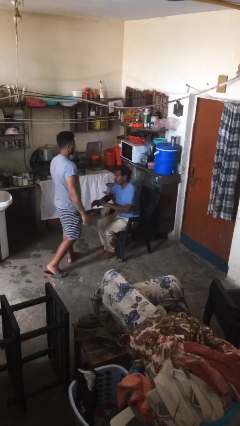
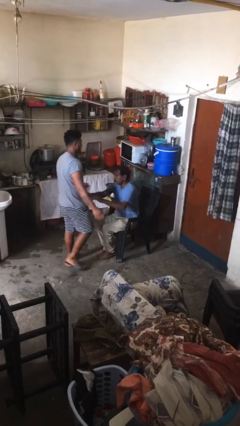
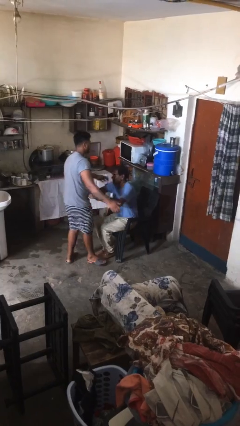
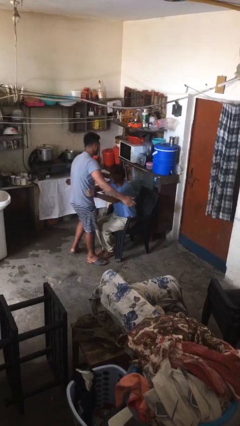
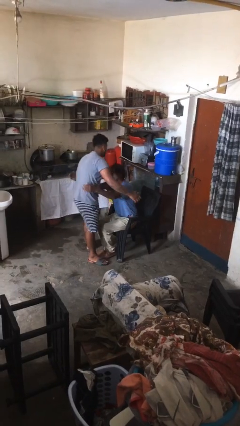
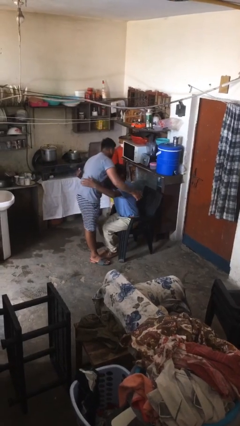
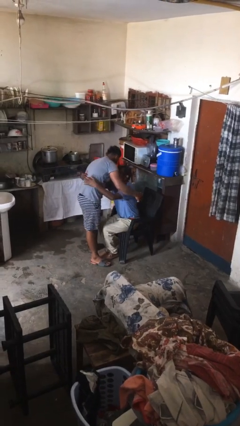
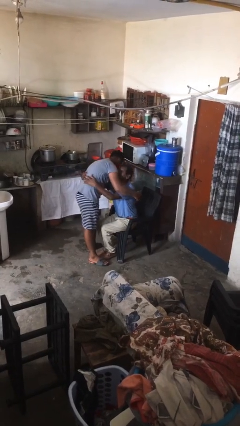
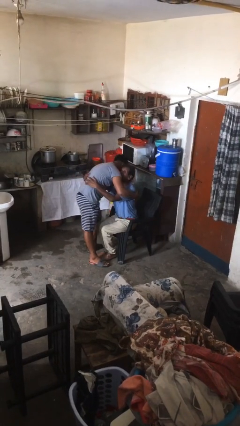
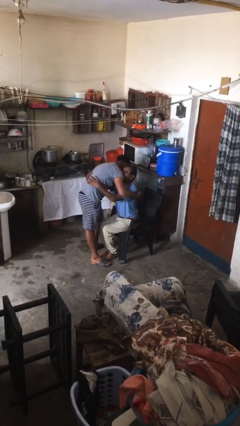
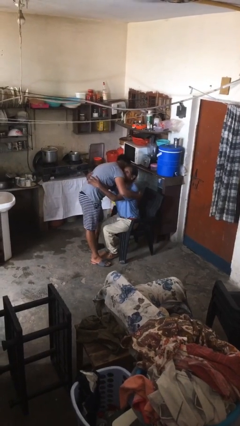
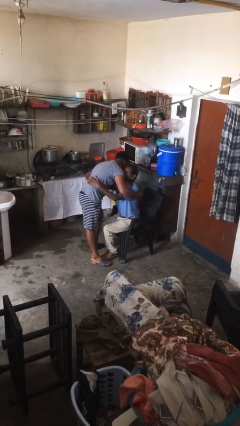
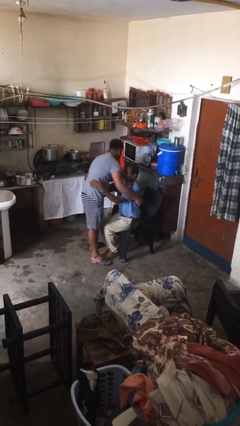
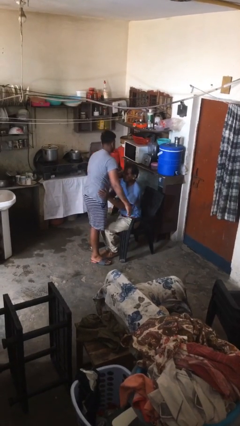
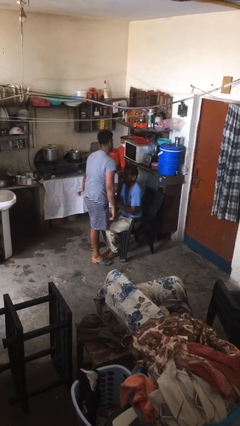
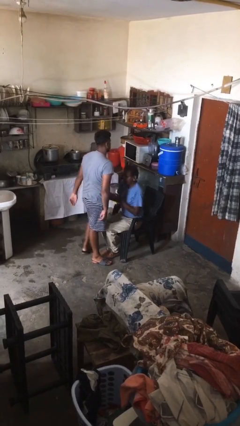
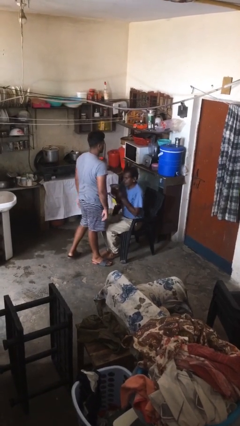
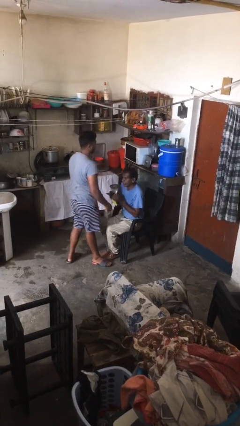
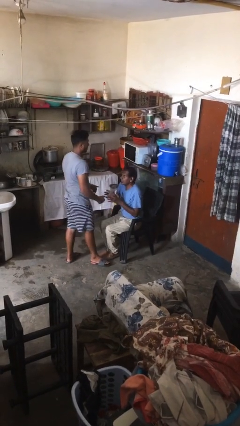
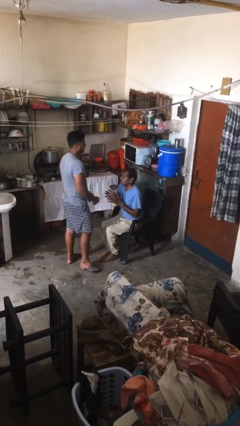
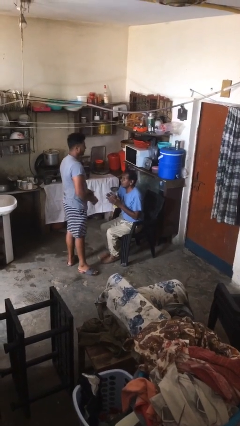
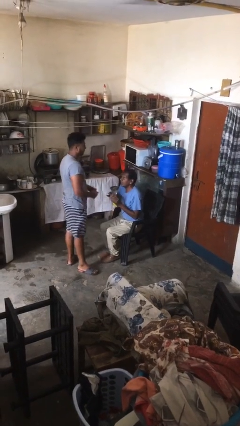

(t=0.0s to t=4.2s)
person embraces person

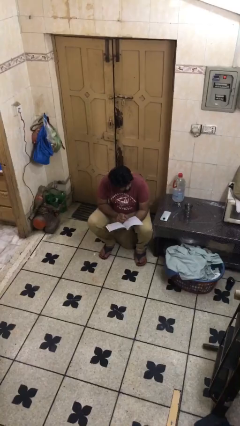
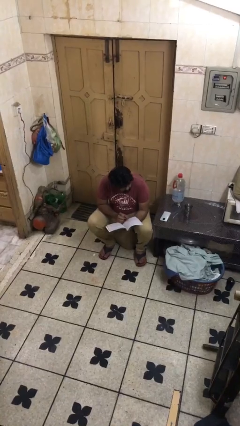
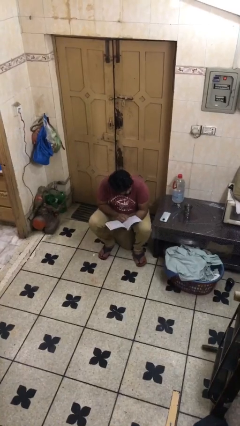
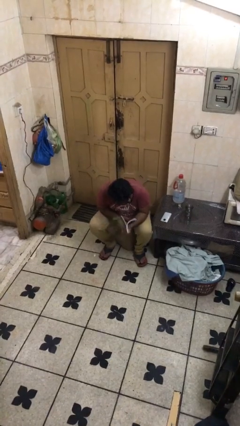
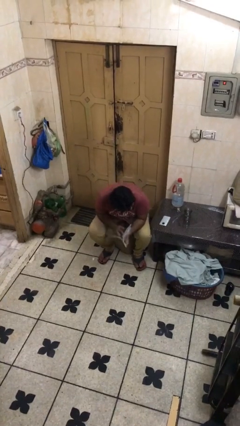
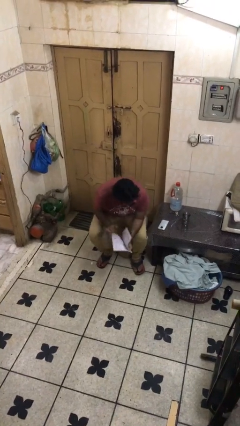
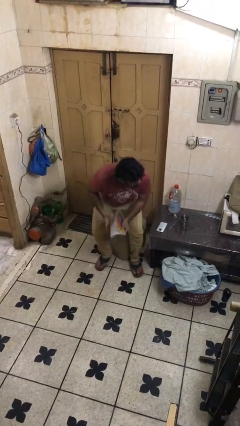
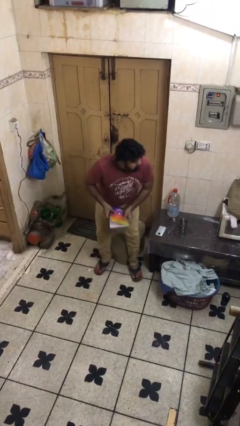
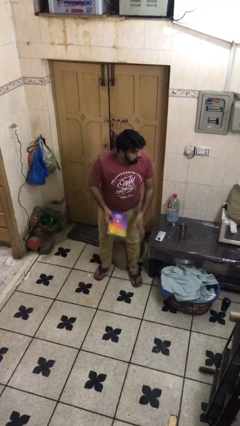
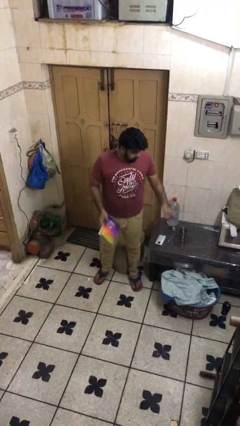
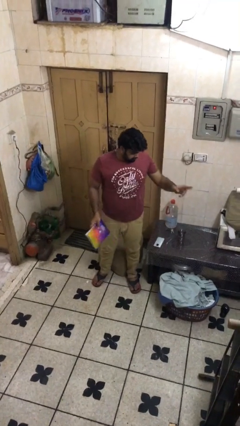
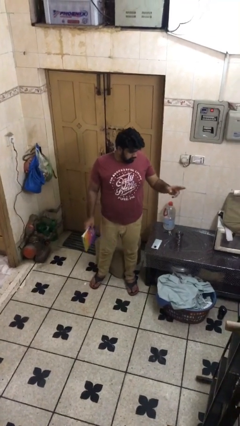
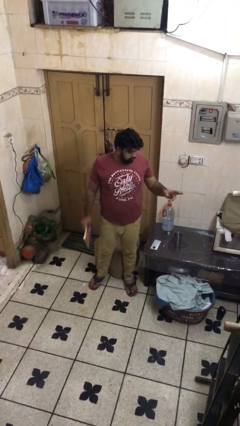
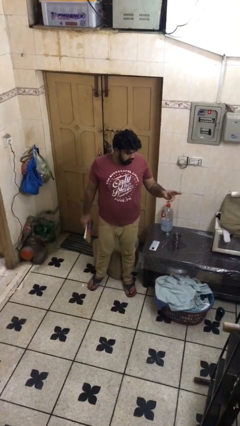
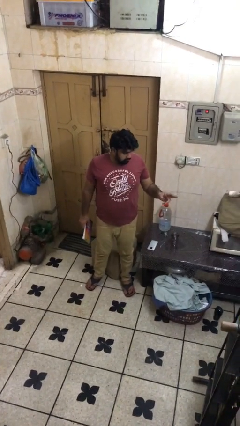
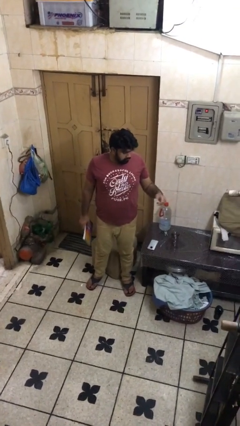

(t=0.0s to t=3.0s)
person stands up

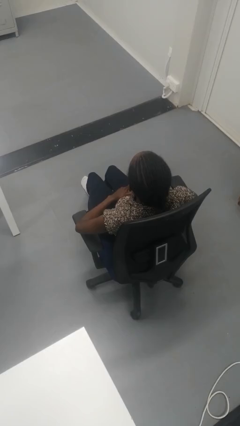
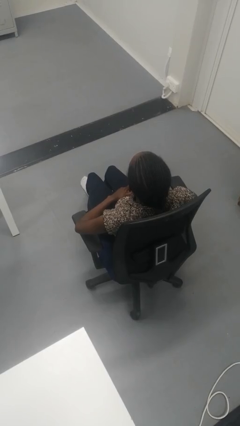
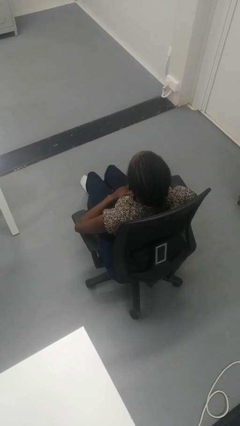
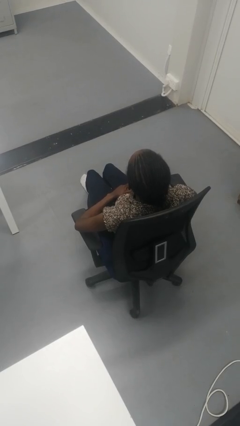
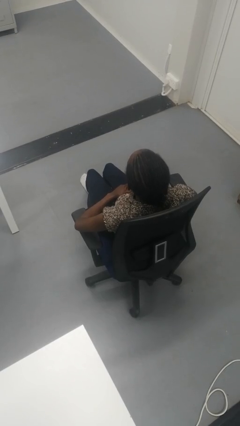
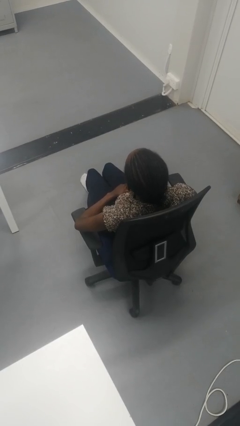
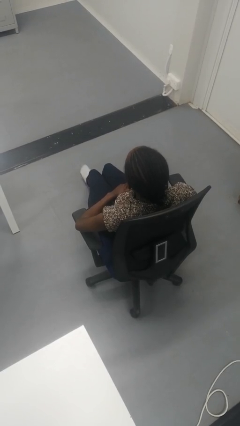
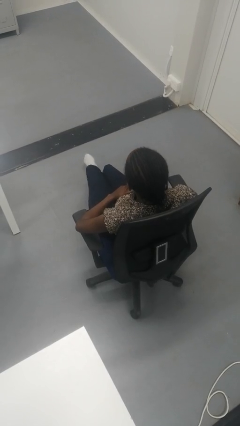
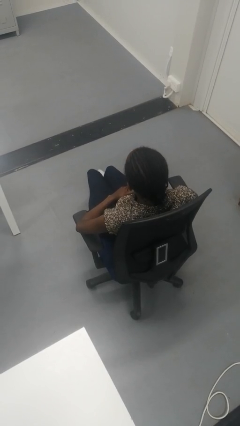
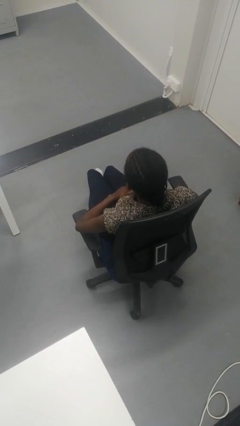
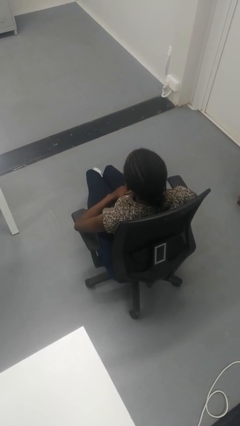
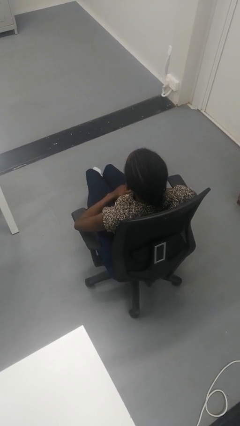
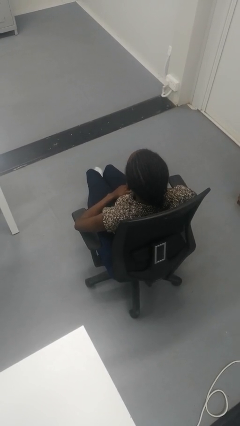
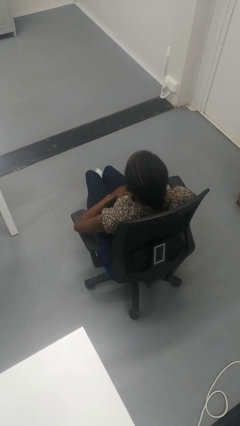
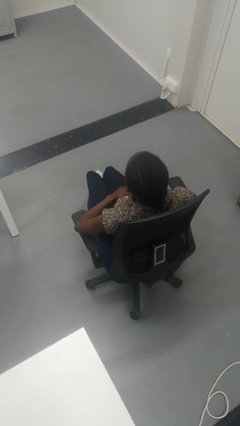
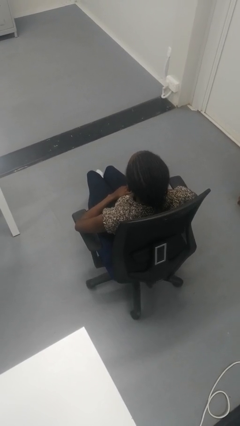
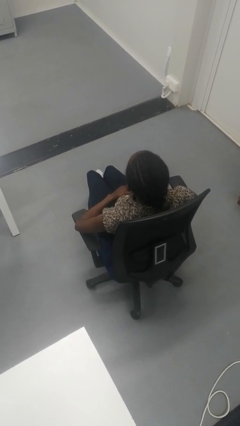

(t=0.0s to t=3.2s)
person crosses legs

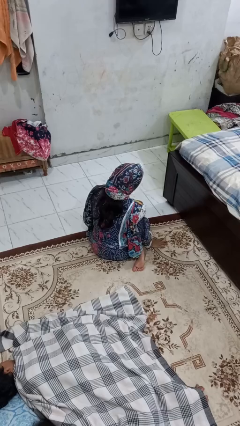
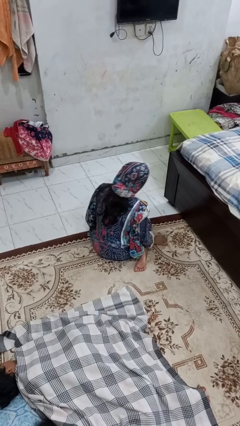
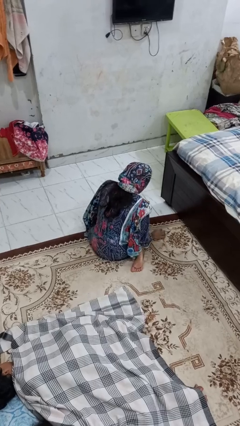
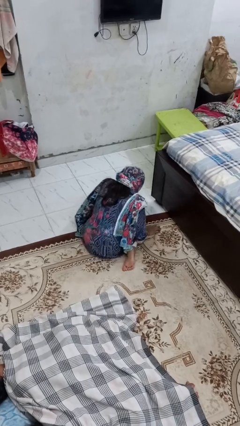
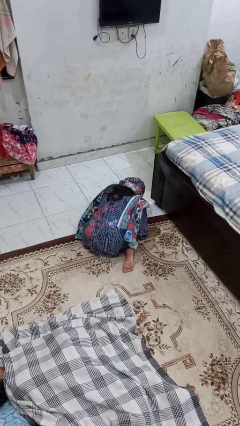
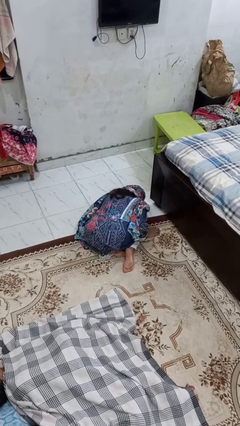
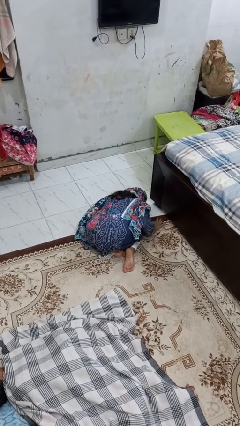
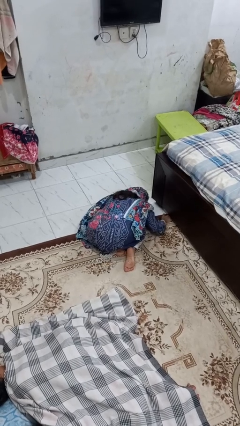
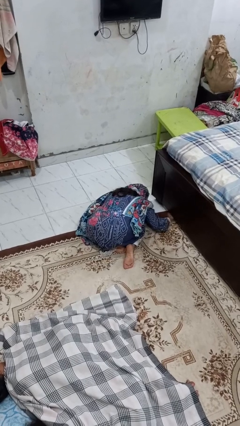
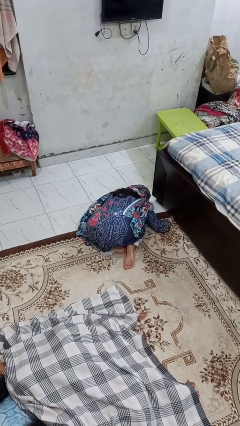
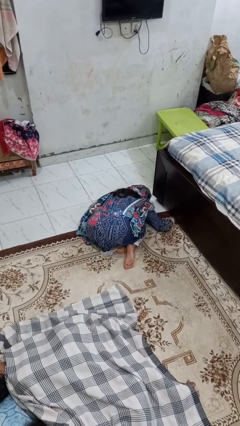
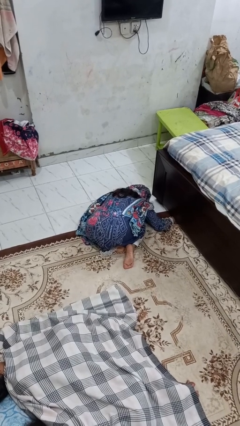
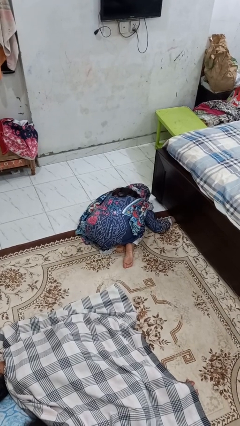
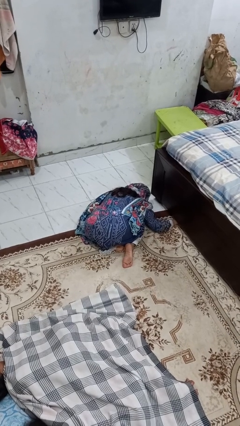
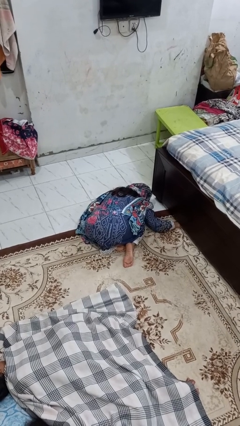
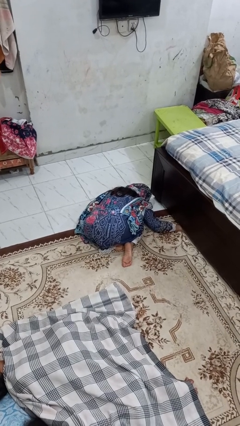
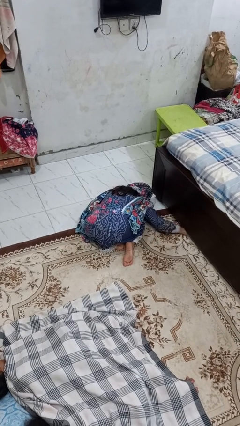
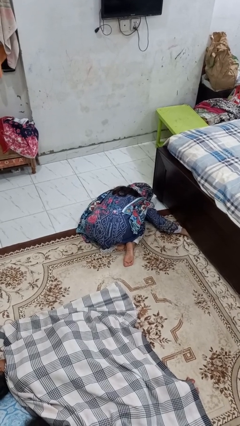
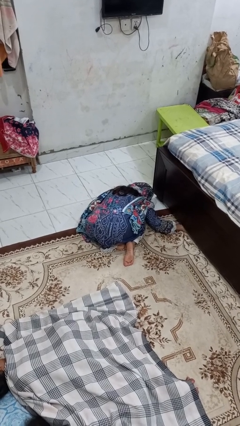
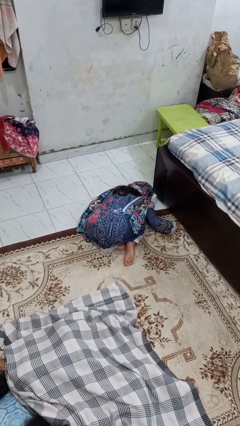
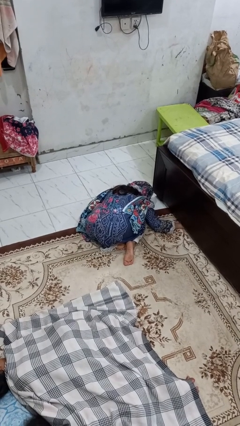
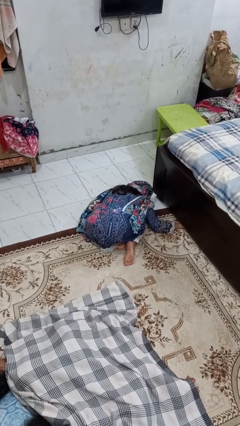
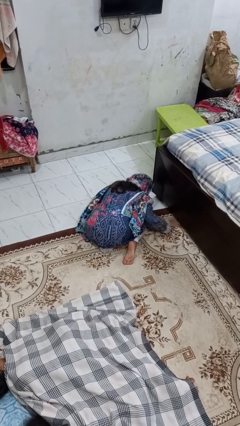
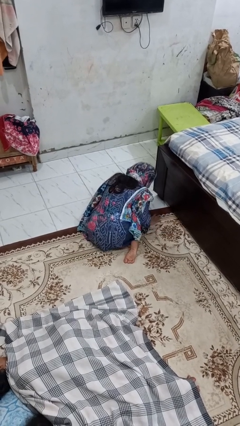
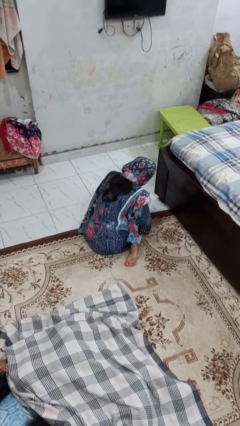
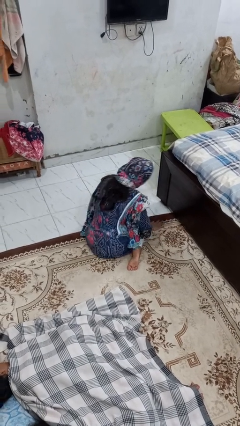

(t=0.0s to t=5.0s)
person searches under bed

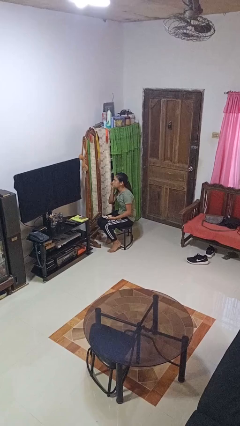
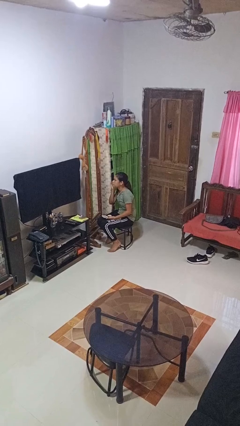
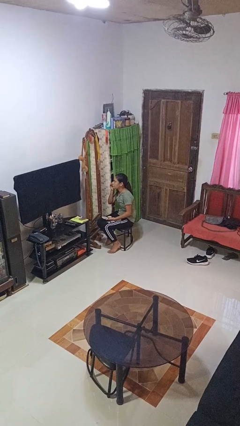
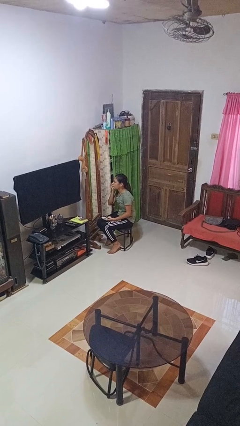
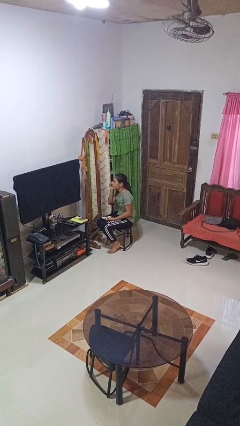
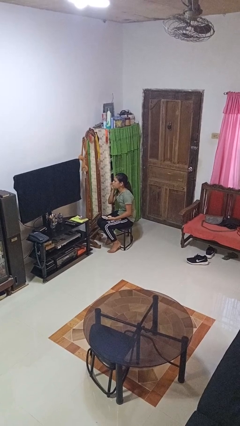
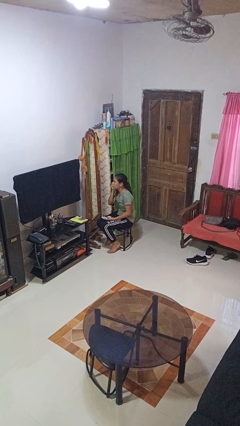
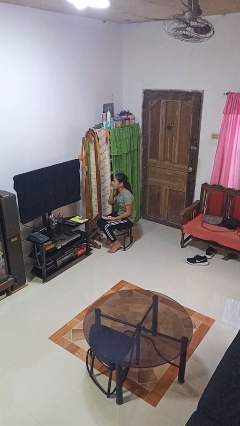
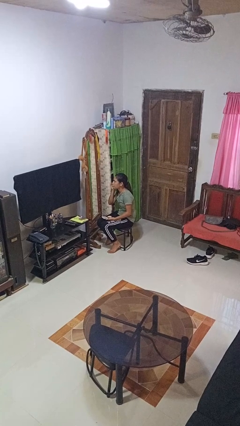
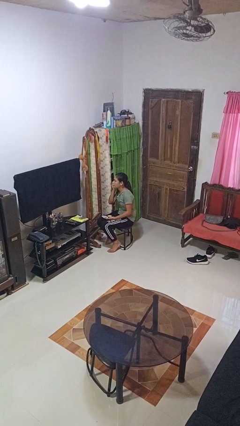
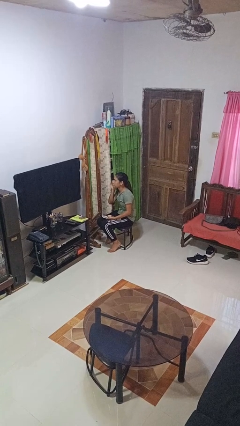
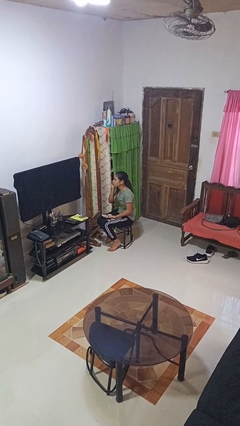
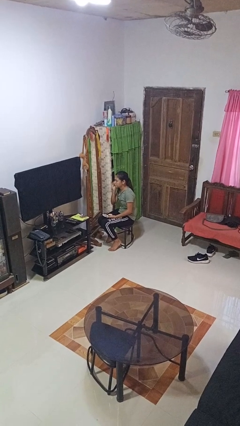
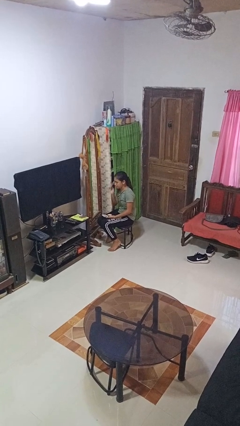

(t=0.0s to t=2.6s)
person applies foundation makeup
